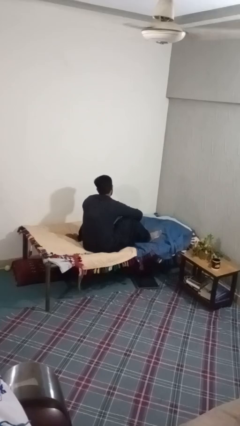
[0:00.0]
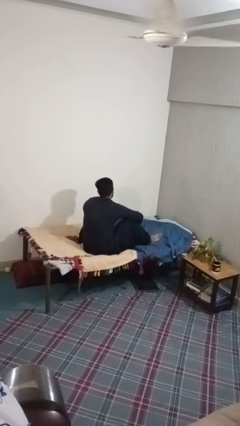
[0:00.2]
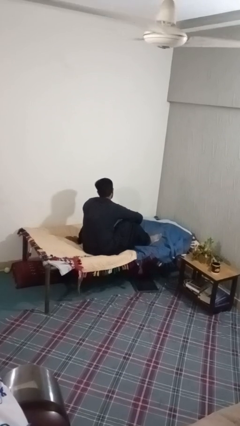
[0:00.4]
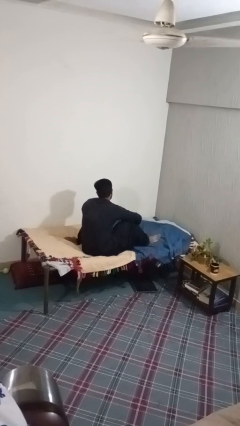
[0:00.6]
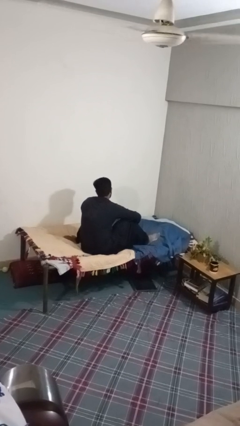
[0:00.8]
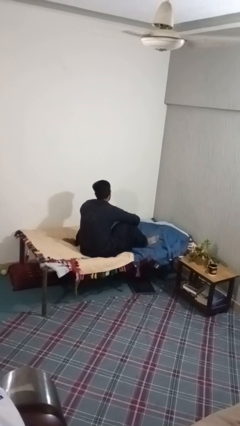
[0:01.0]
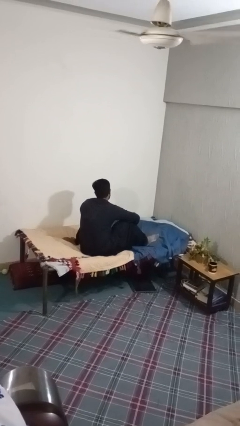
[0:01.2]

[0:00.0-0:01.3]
person rubs foot

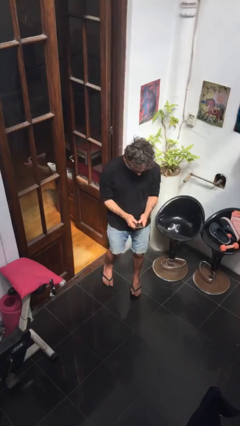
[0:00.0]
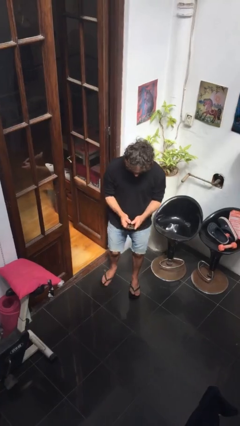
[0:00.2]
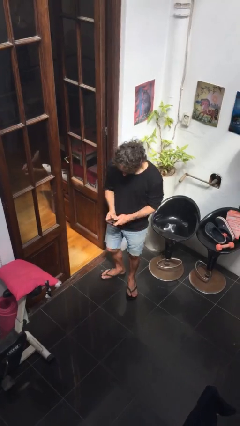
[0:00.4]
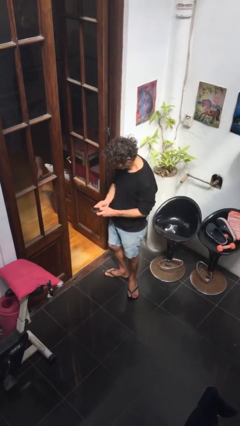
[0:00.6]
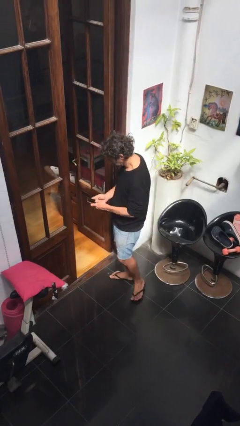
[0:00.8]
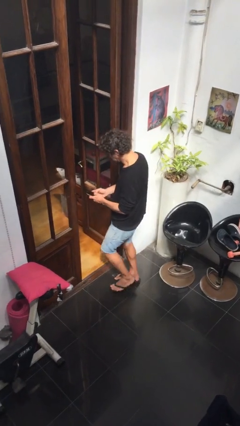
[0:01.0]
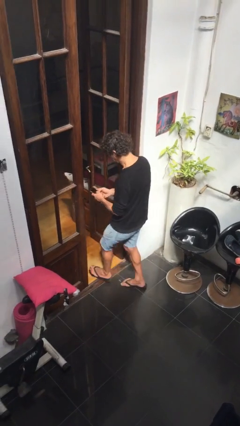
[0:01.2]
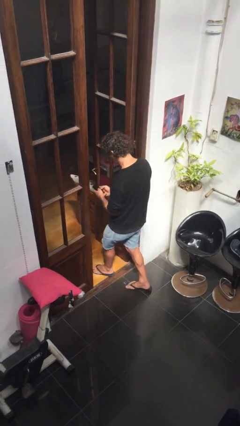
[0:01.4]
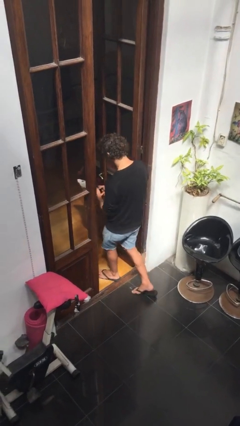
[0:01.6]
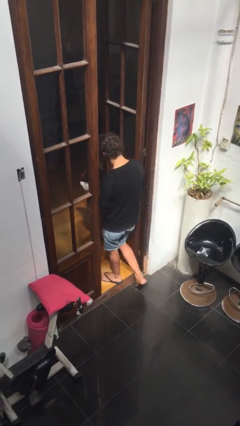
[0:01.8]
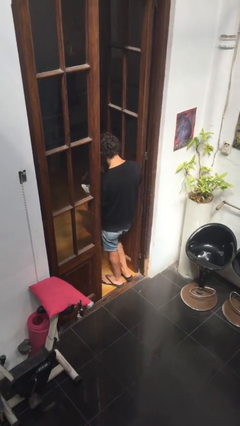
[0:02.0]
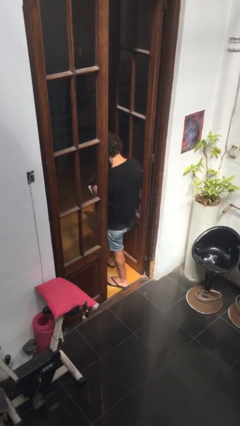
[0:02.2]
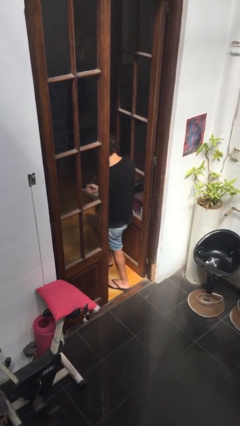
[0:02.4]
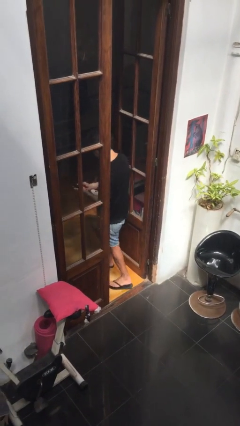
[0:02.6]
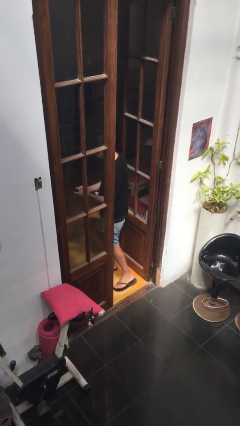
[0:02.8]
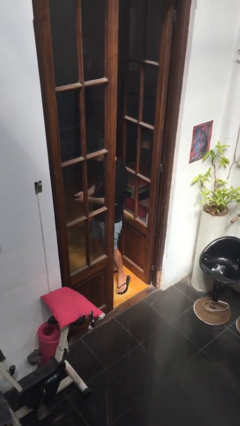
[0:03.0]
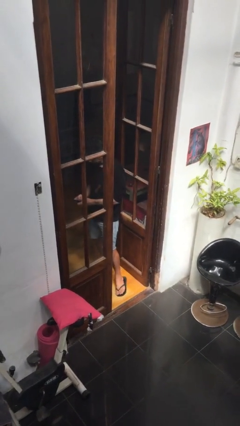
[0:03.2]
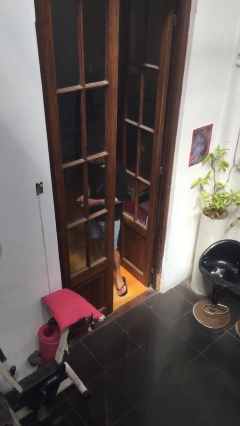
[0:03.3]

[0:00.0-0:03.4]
person exits scene through structure

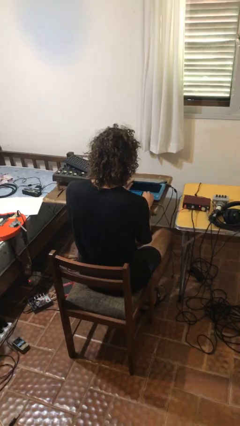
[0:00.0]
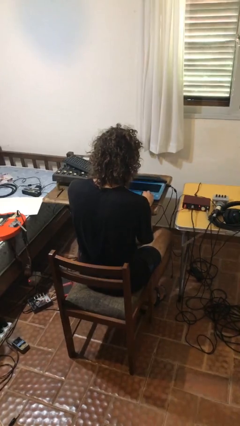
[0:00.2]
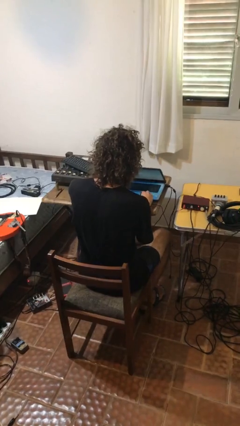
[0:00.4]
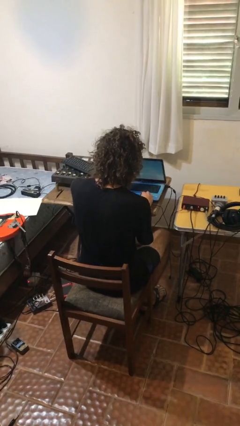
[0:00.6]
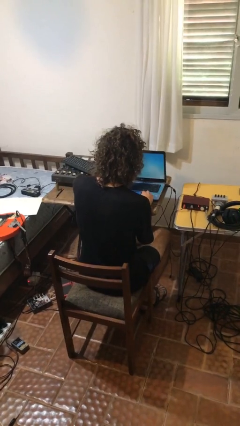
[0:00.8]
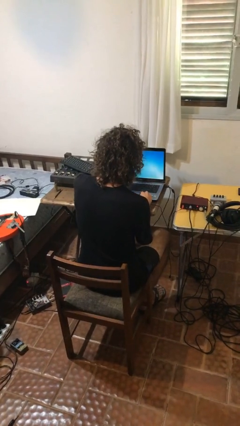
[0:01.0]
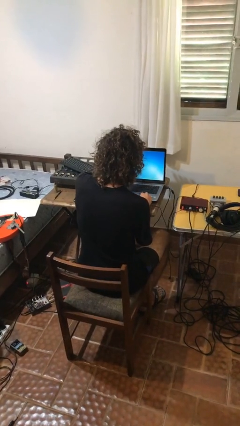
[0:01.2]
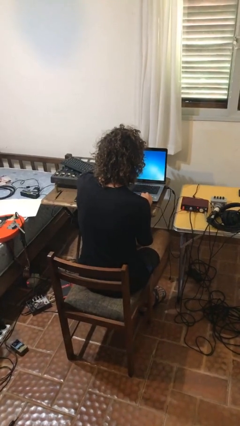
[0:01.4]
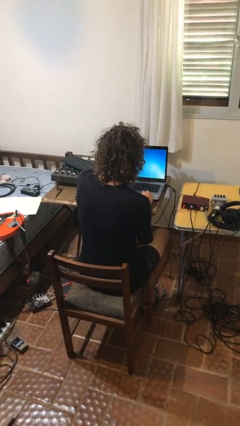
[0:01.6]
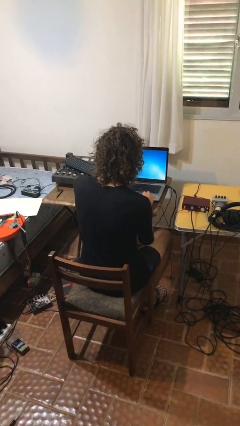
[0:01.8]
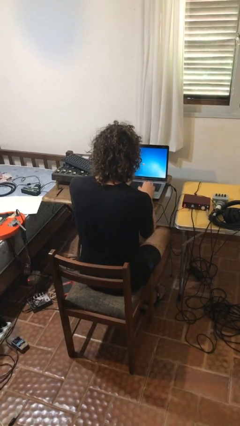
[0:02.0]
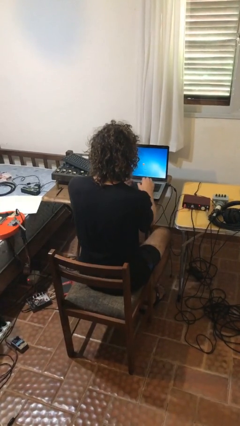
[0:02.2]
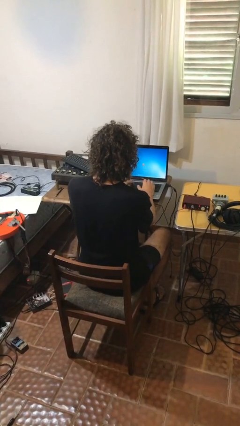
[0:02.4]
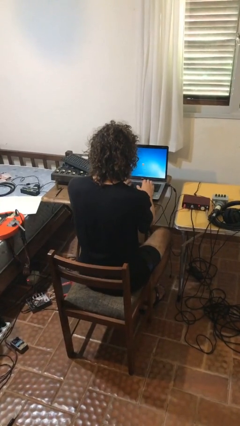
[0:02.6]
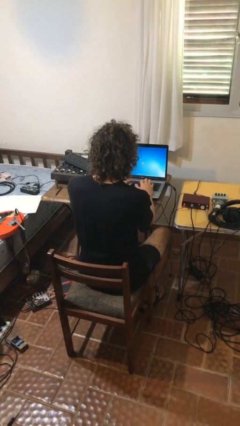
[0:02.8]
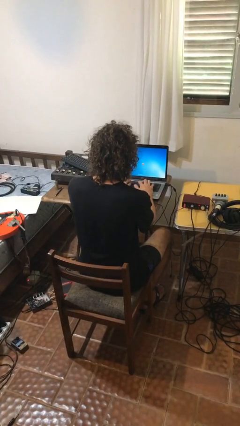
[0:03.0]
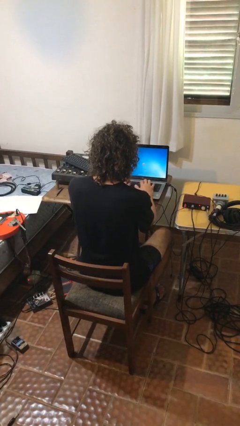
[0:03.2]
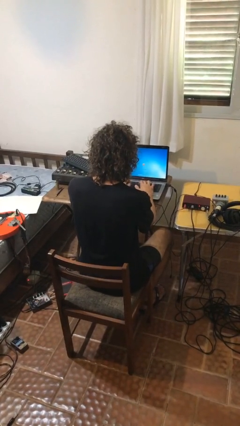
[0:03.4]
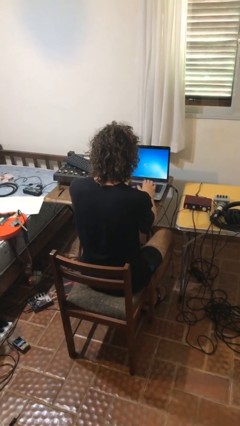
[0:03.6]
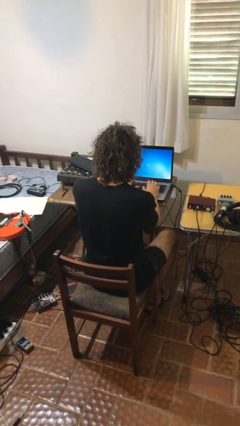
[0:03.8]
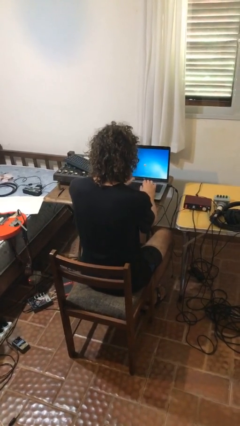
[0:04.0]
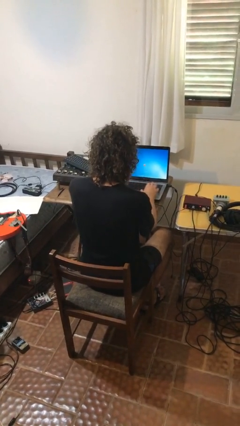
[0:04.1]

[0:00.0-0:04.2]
person interacts with laptop

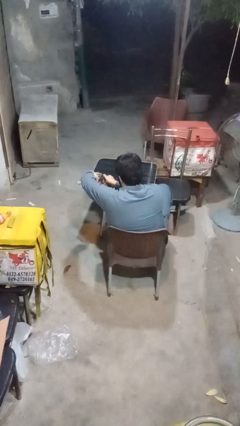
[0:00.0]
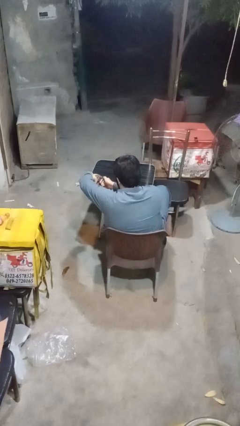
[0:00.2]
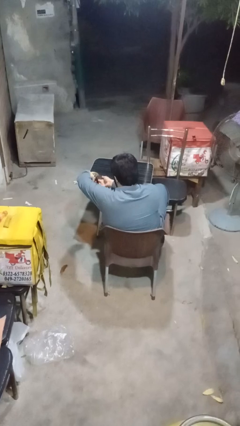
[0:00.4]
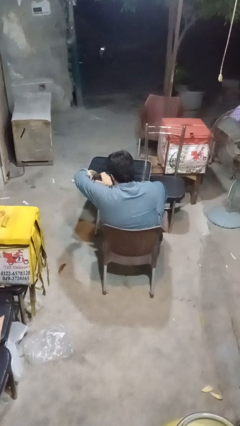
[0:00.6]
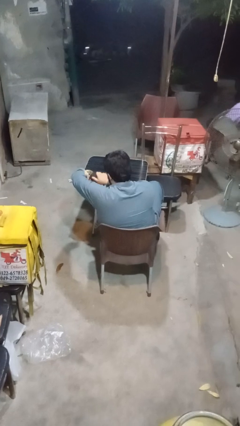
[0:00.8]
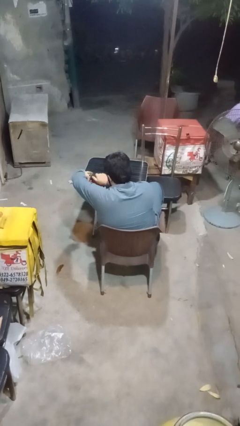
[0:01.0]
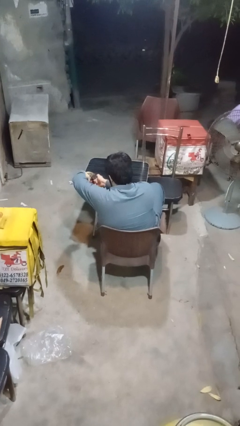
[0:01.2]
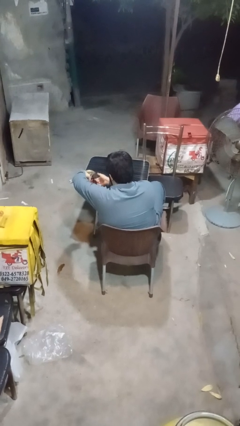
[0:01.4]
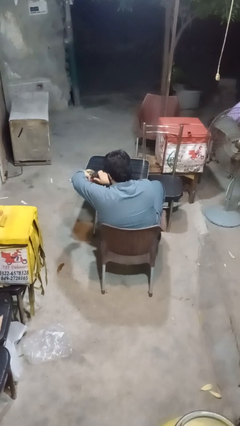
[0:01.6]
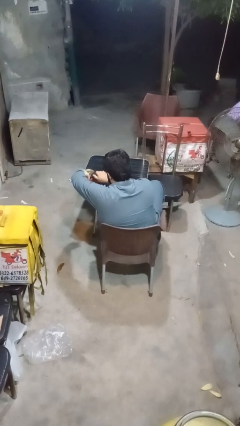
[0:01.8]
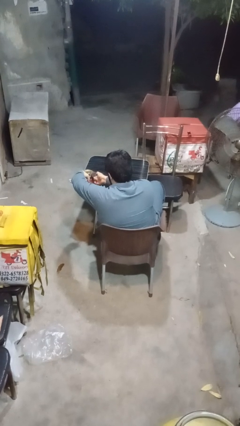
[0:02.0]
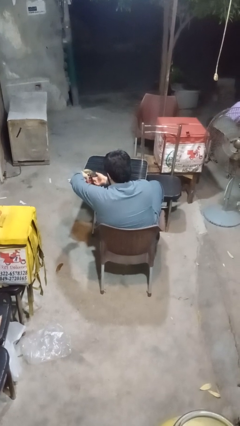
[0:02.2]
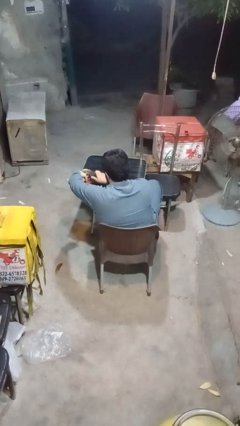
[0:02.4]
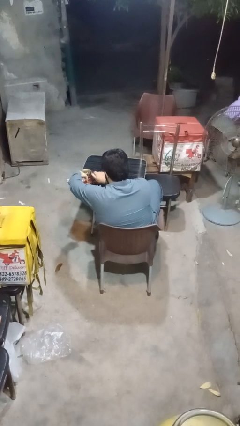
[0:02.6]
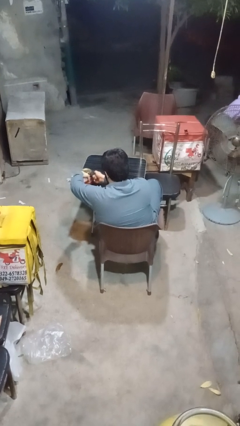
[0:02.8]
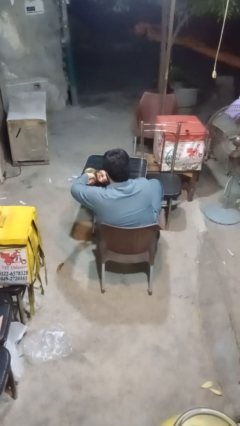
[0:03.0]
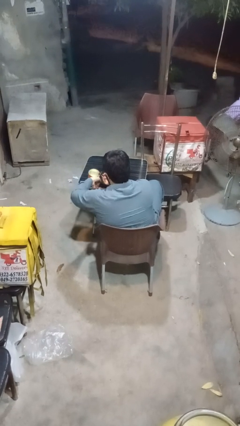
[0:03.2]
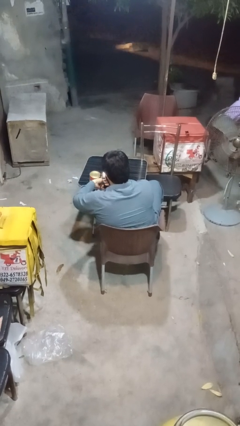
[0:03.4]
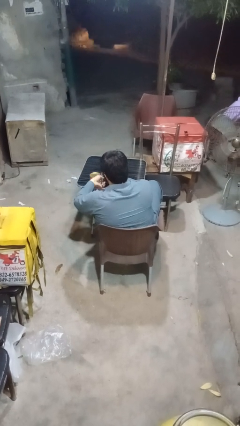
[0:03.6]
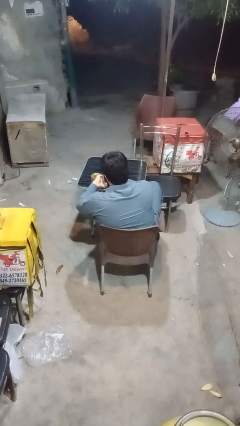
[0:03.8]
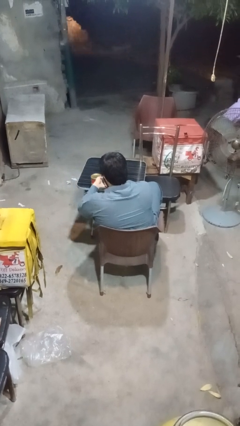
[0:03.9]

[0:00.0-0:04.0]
person opens can with can opener

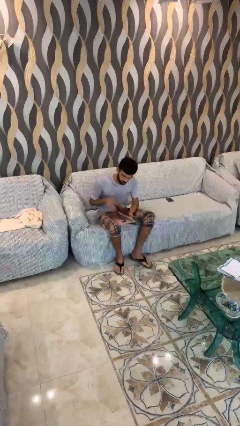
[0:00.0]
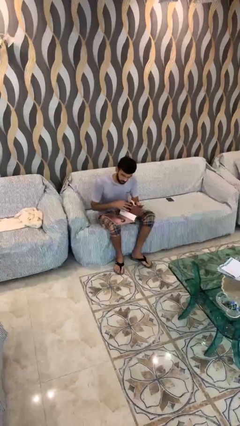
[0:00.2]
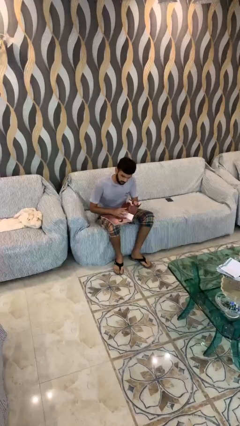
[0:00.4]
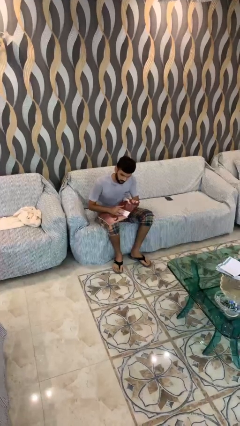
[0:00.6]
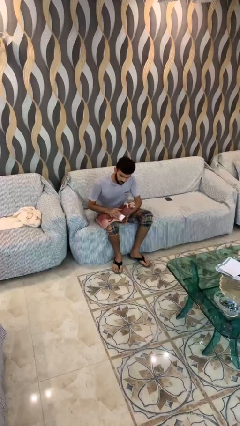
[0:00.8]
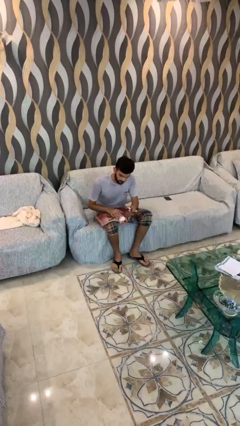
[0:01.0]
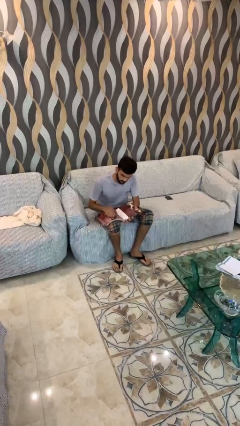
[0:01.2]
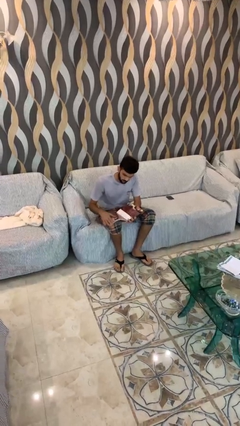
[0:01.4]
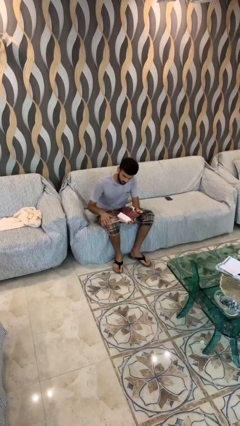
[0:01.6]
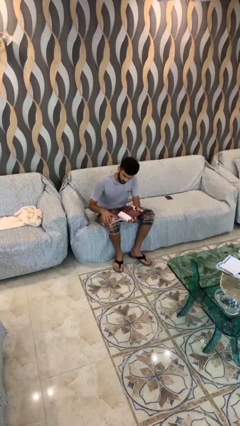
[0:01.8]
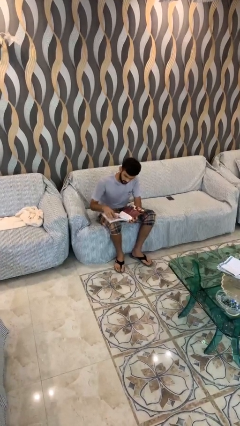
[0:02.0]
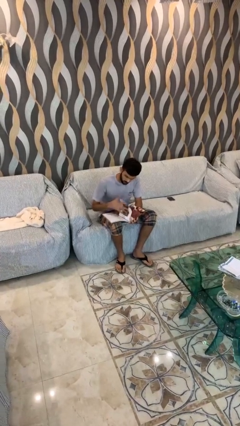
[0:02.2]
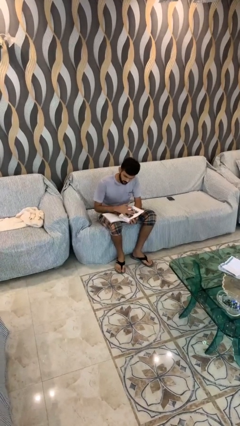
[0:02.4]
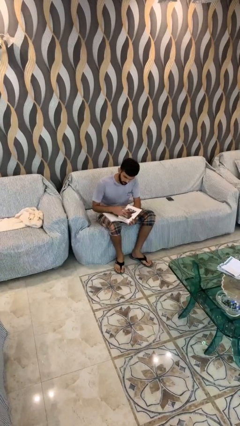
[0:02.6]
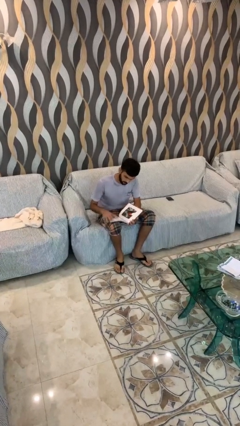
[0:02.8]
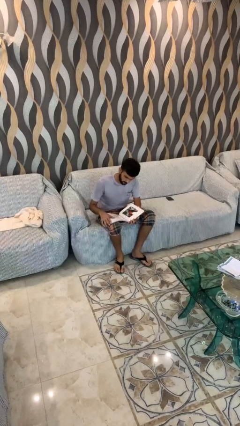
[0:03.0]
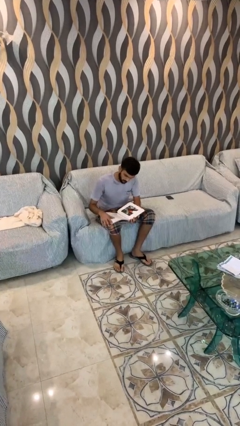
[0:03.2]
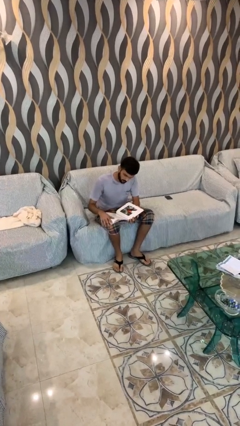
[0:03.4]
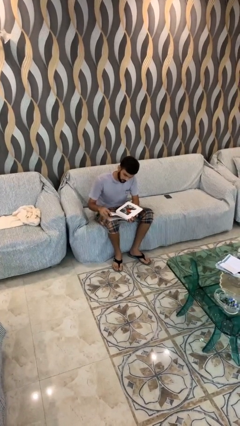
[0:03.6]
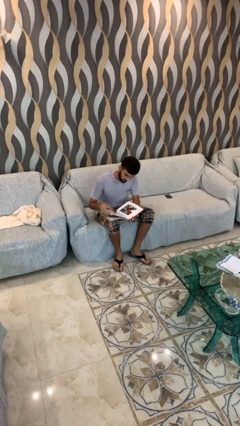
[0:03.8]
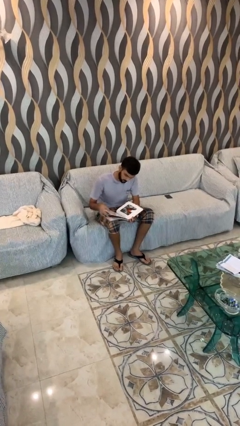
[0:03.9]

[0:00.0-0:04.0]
person reads document

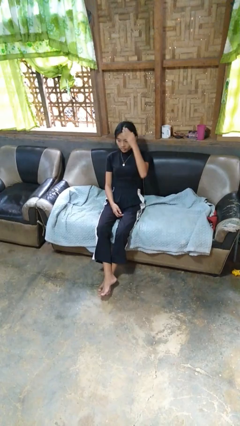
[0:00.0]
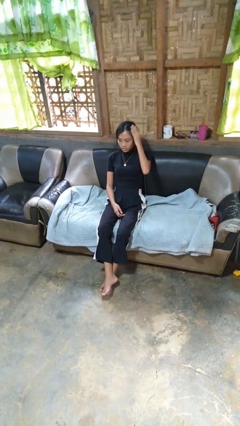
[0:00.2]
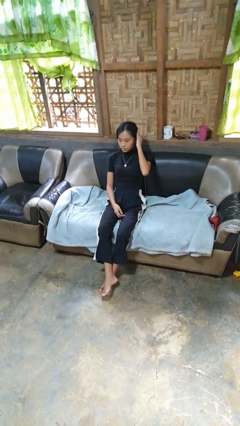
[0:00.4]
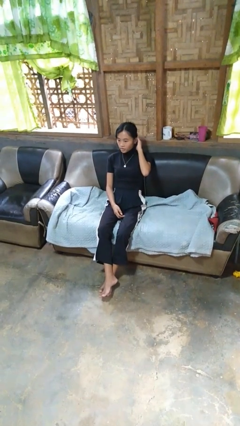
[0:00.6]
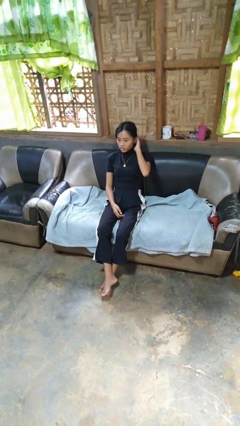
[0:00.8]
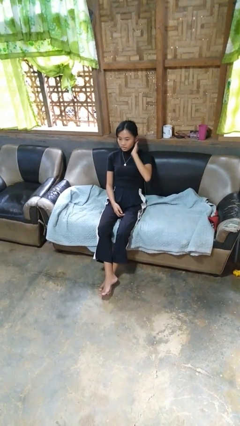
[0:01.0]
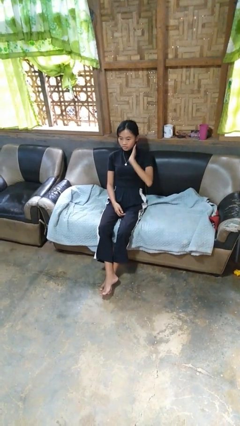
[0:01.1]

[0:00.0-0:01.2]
person strokes hair
